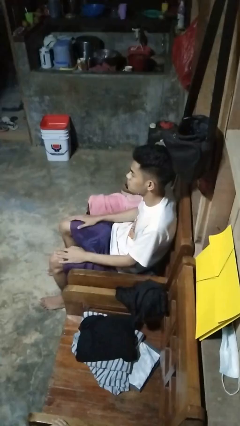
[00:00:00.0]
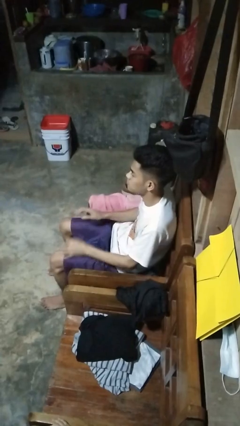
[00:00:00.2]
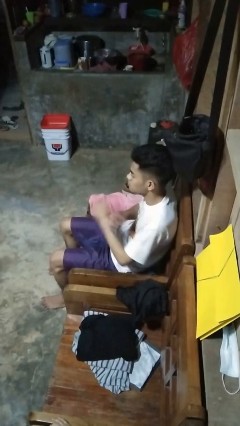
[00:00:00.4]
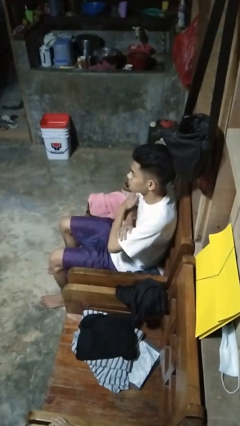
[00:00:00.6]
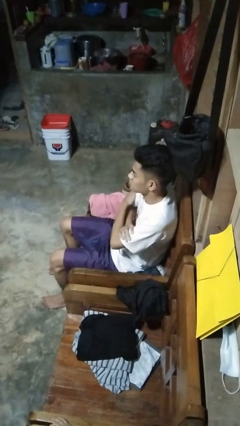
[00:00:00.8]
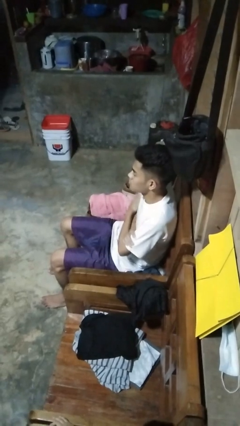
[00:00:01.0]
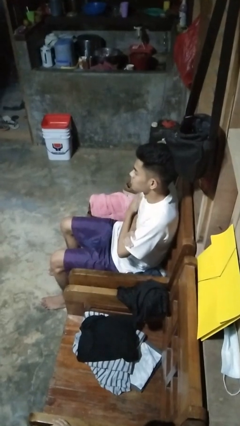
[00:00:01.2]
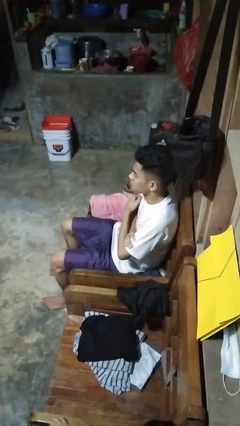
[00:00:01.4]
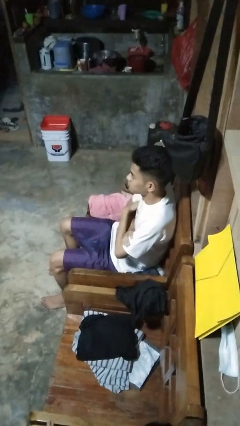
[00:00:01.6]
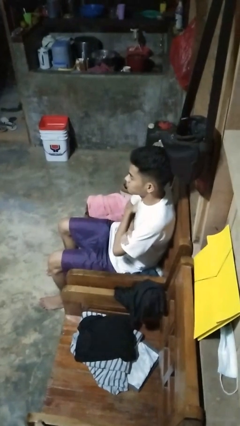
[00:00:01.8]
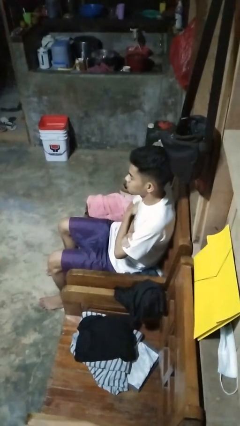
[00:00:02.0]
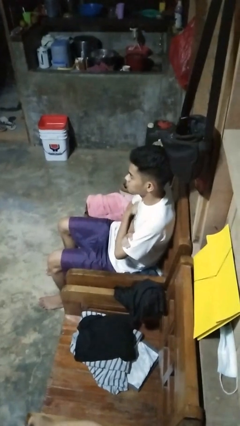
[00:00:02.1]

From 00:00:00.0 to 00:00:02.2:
person crosses arms

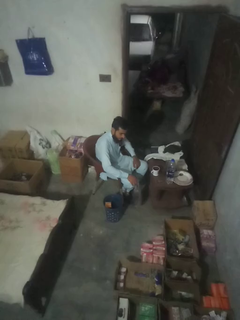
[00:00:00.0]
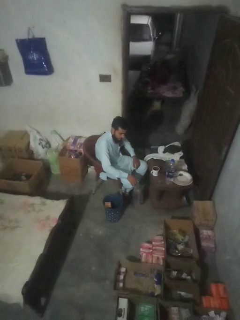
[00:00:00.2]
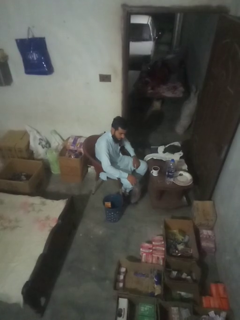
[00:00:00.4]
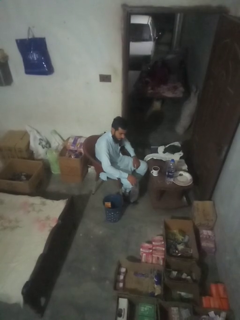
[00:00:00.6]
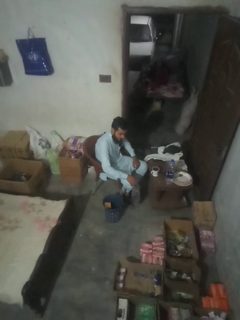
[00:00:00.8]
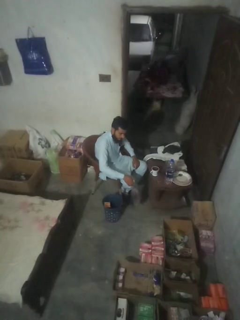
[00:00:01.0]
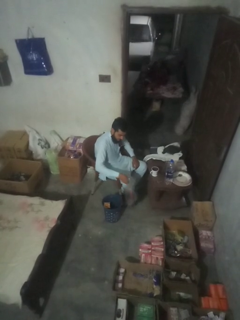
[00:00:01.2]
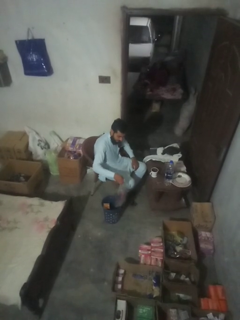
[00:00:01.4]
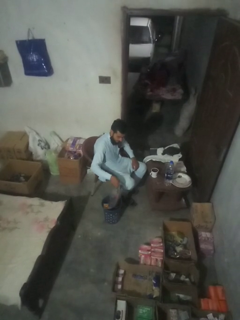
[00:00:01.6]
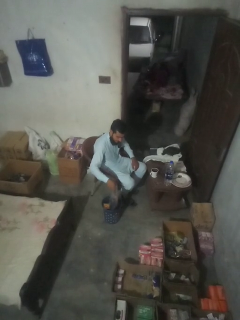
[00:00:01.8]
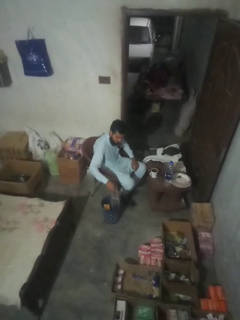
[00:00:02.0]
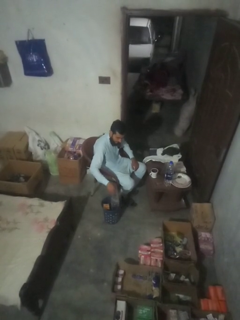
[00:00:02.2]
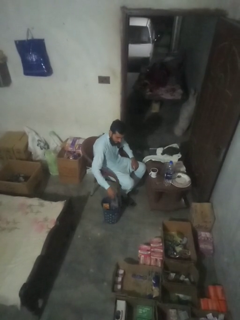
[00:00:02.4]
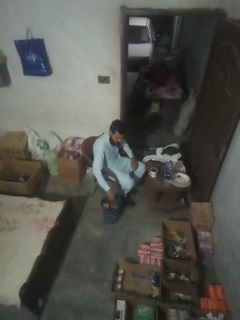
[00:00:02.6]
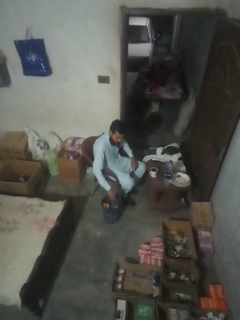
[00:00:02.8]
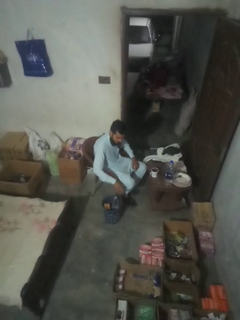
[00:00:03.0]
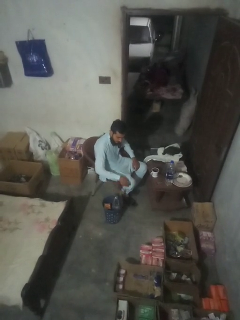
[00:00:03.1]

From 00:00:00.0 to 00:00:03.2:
person removes trashbag from trashcan

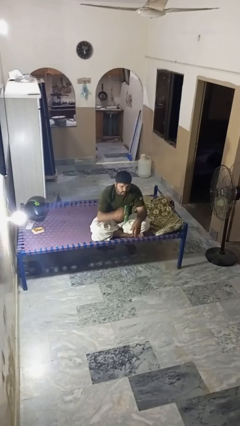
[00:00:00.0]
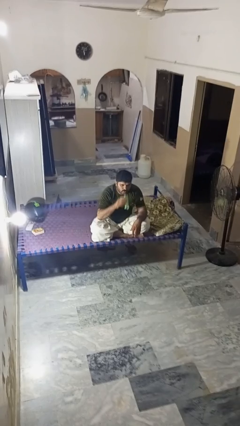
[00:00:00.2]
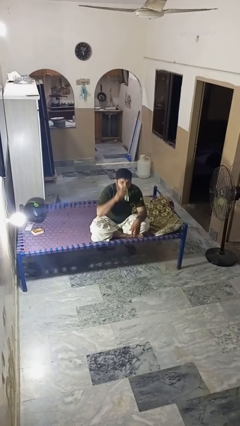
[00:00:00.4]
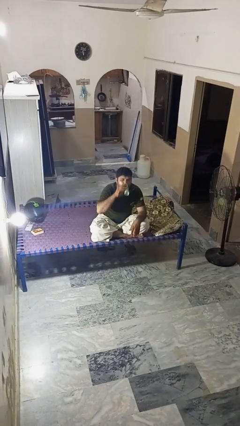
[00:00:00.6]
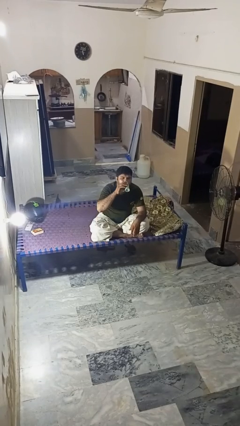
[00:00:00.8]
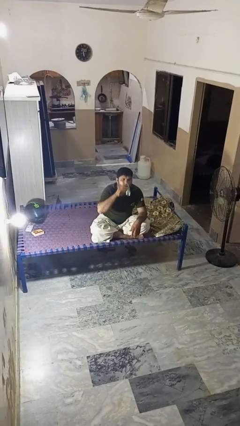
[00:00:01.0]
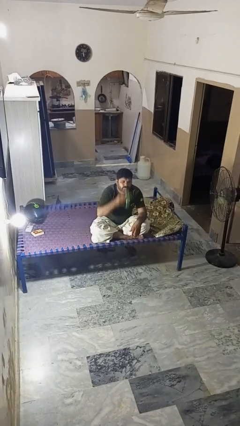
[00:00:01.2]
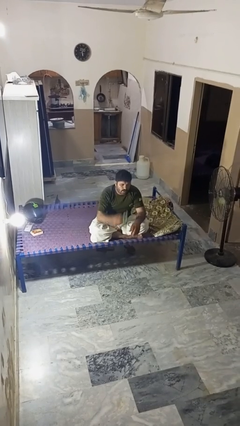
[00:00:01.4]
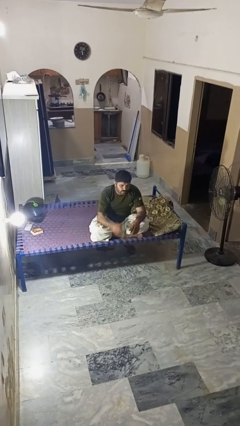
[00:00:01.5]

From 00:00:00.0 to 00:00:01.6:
person drinks from beverage can

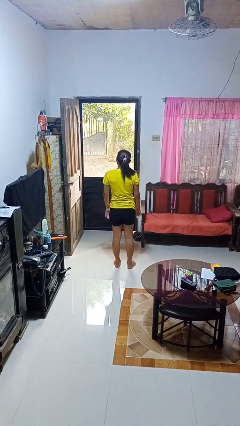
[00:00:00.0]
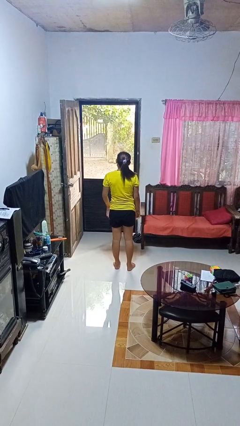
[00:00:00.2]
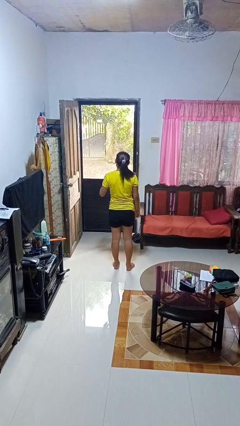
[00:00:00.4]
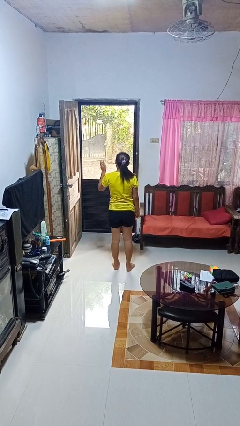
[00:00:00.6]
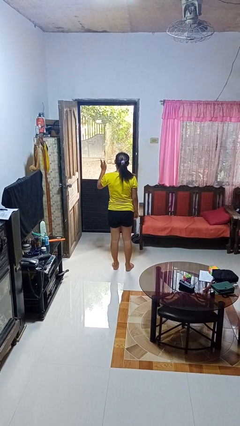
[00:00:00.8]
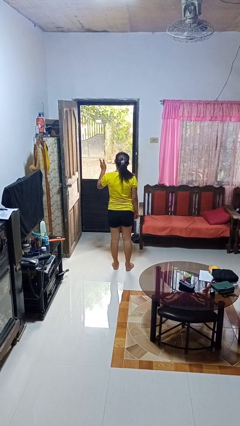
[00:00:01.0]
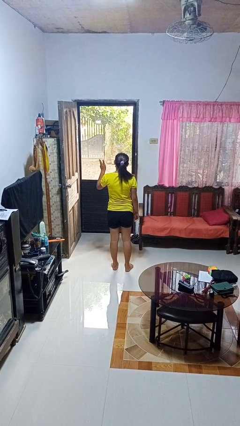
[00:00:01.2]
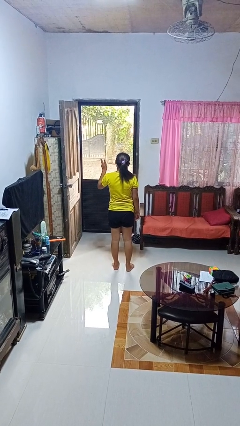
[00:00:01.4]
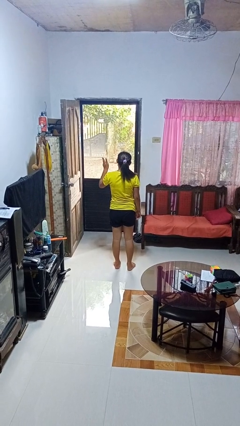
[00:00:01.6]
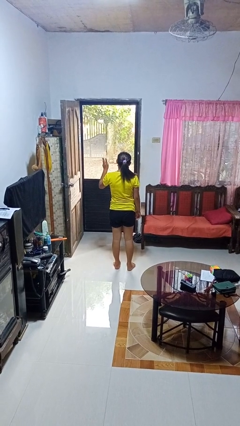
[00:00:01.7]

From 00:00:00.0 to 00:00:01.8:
person gestures number three

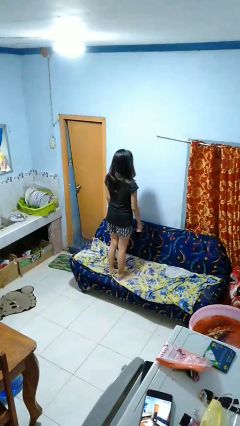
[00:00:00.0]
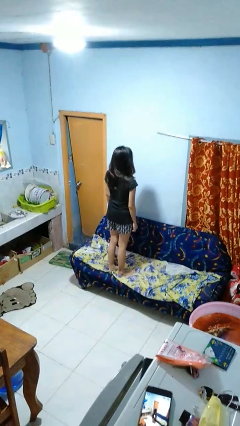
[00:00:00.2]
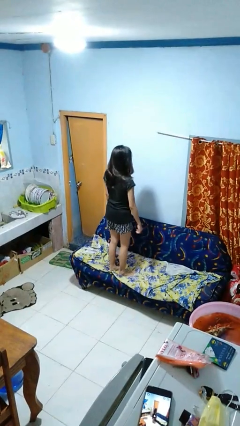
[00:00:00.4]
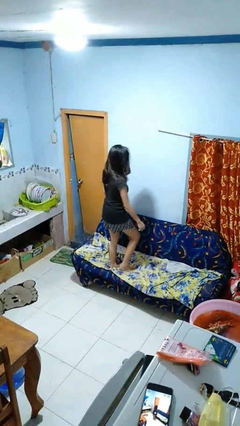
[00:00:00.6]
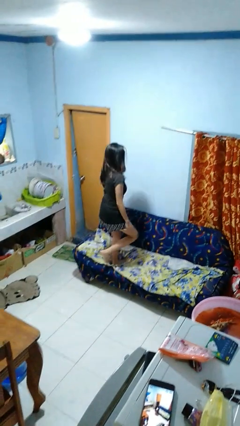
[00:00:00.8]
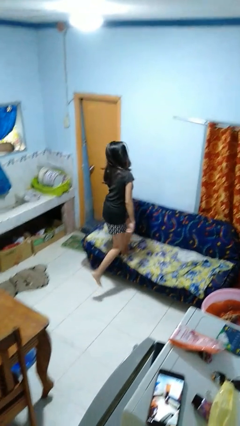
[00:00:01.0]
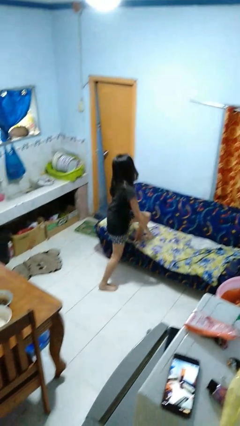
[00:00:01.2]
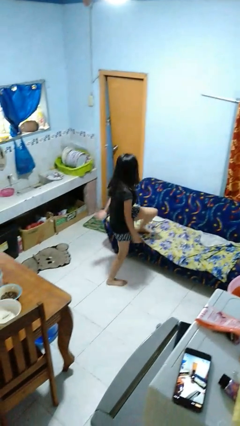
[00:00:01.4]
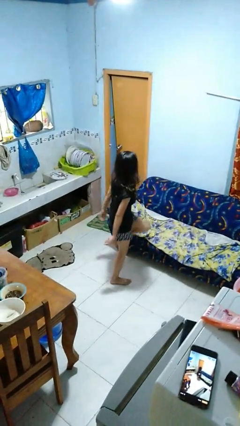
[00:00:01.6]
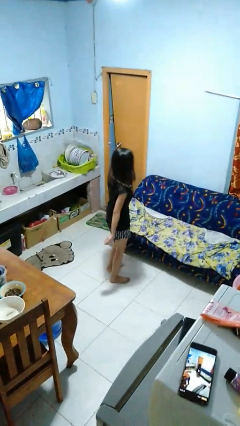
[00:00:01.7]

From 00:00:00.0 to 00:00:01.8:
person climbs off couch

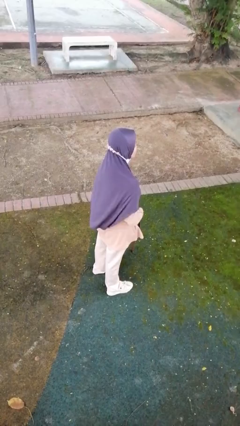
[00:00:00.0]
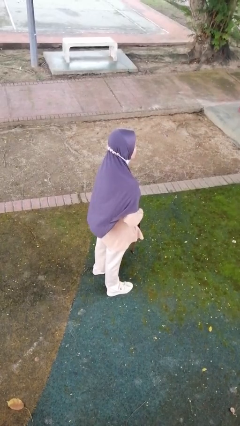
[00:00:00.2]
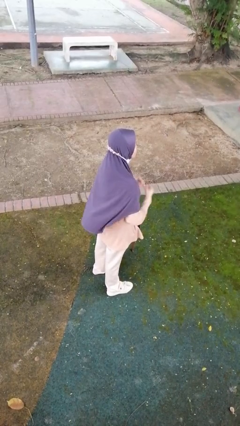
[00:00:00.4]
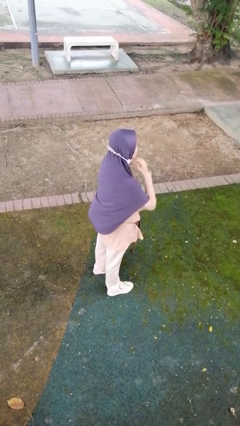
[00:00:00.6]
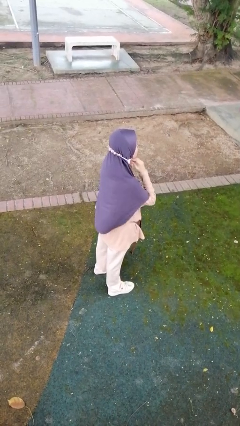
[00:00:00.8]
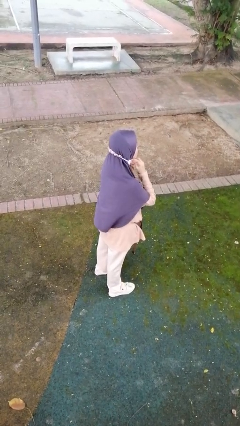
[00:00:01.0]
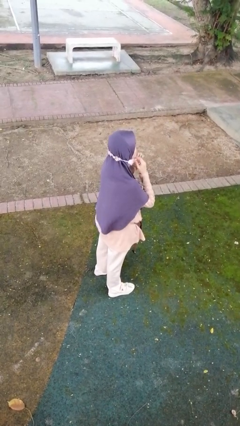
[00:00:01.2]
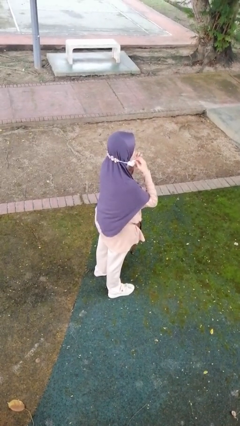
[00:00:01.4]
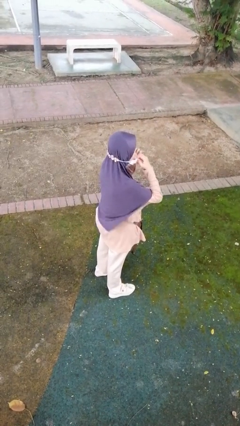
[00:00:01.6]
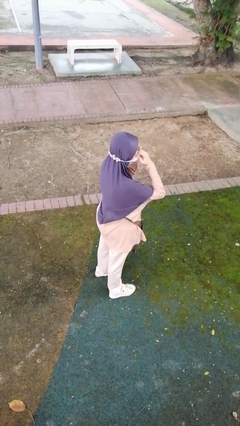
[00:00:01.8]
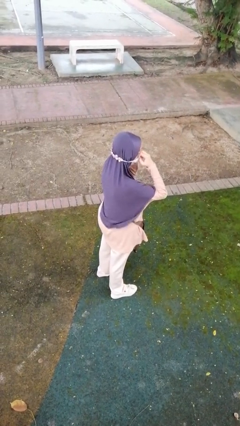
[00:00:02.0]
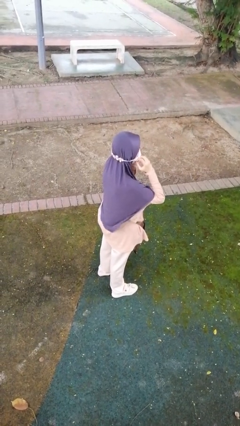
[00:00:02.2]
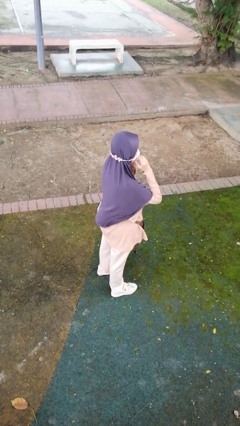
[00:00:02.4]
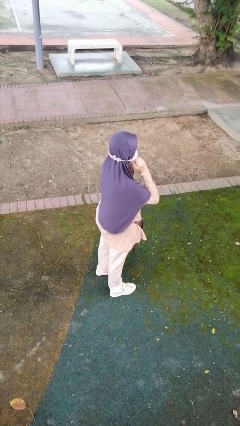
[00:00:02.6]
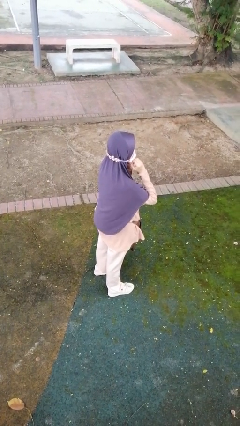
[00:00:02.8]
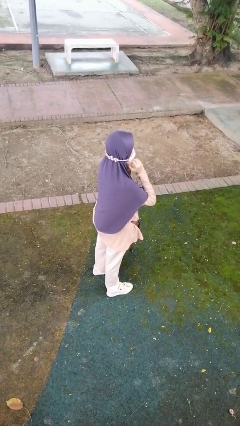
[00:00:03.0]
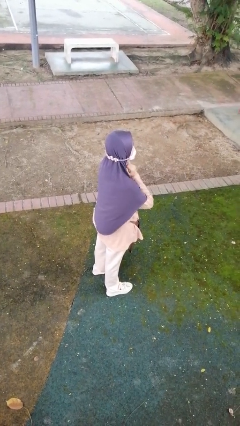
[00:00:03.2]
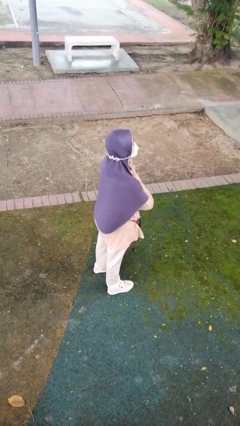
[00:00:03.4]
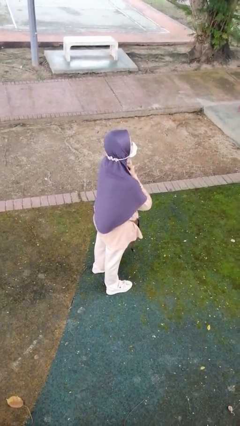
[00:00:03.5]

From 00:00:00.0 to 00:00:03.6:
person puts on facemask

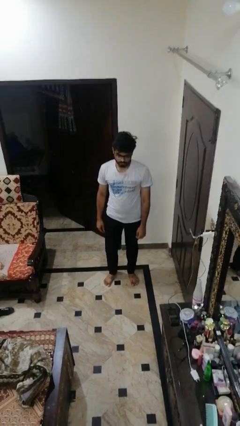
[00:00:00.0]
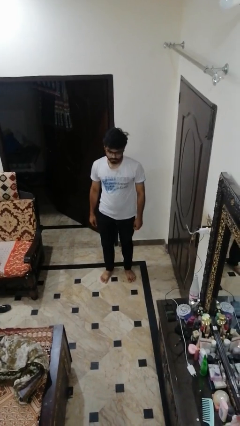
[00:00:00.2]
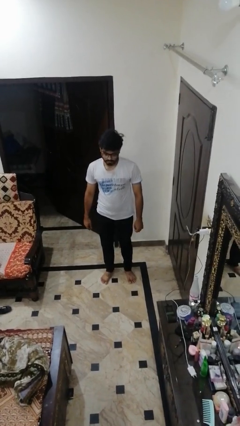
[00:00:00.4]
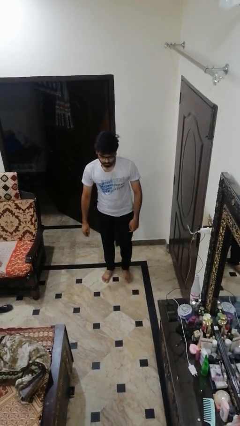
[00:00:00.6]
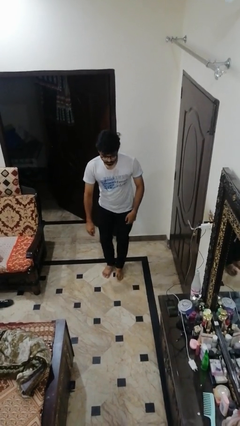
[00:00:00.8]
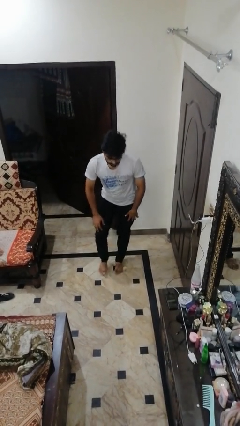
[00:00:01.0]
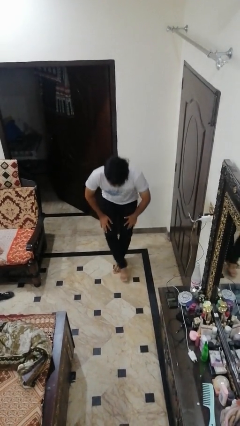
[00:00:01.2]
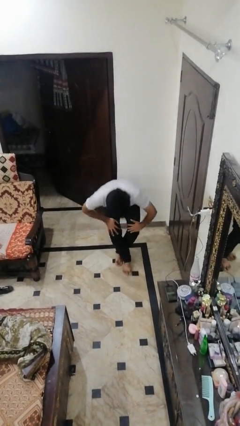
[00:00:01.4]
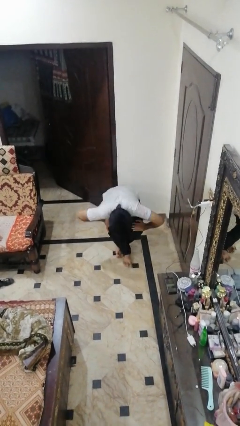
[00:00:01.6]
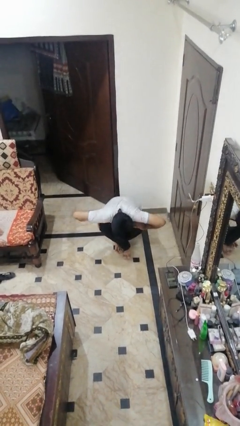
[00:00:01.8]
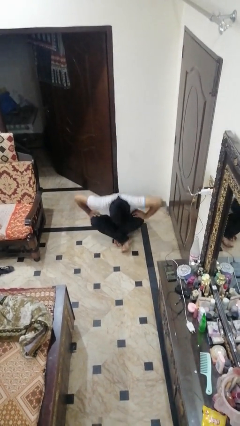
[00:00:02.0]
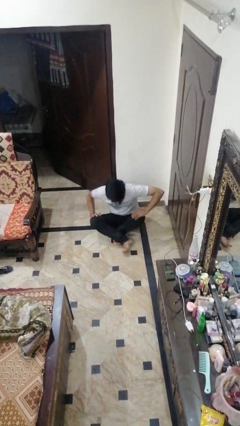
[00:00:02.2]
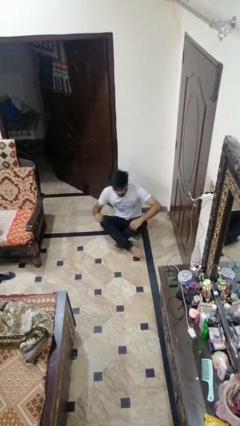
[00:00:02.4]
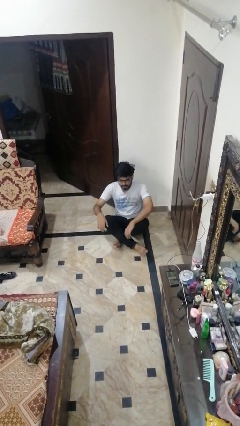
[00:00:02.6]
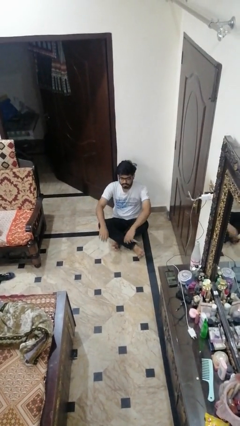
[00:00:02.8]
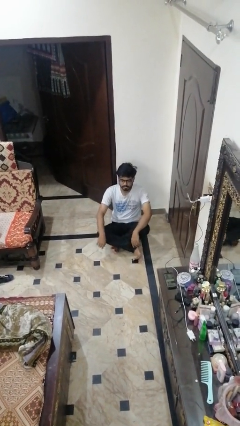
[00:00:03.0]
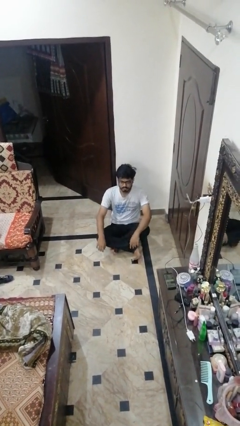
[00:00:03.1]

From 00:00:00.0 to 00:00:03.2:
person sits crisscross
